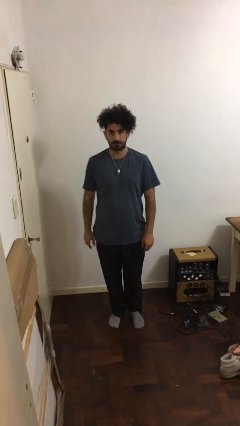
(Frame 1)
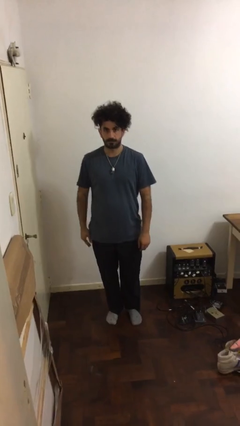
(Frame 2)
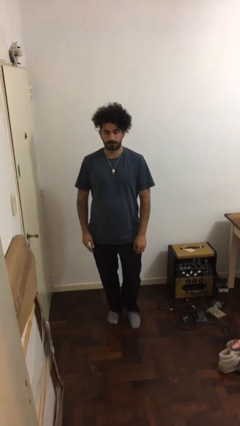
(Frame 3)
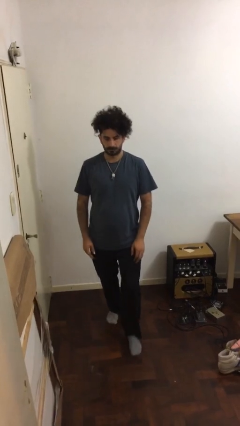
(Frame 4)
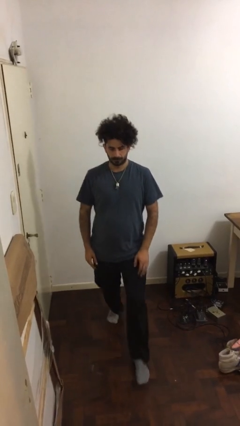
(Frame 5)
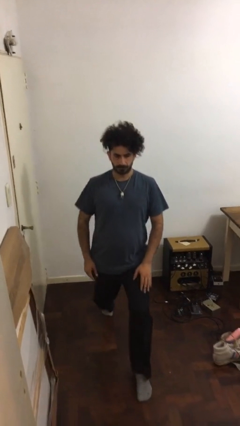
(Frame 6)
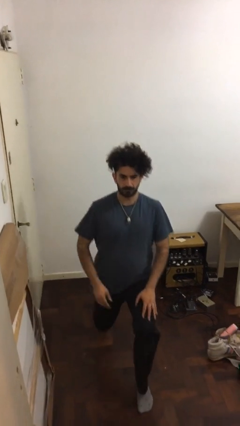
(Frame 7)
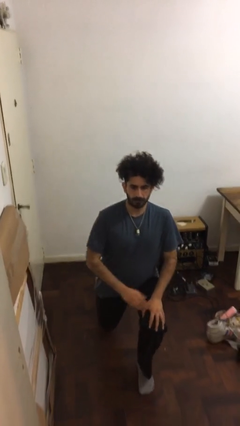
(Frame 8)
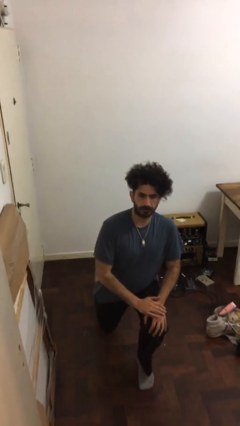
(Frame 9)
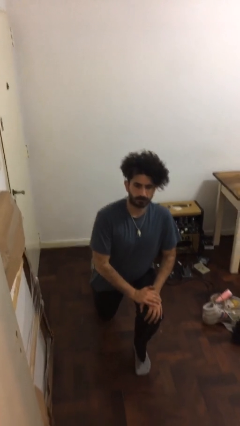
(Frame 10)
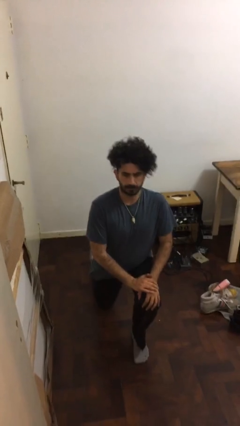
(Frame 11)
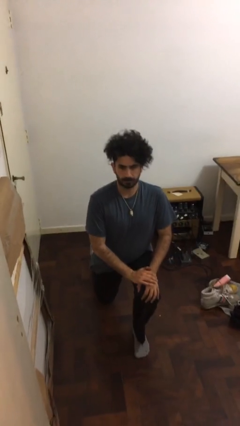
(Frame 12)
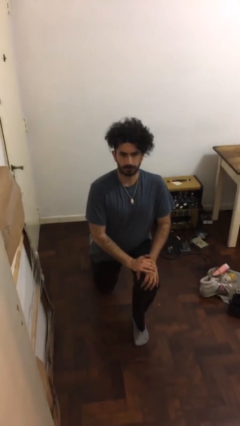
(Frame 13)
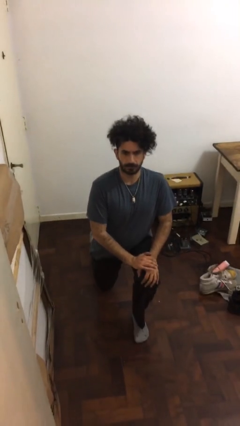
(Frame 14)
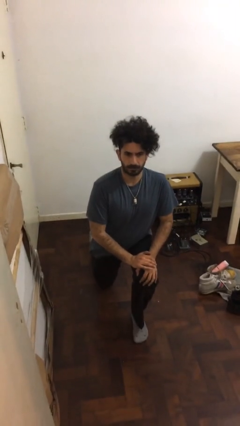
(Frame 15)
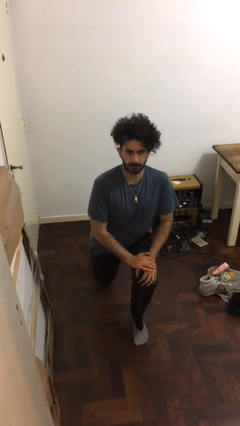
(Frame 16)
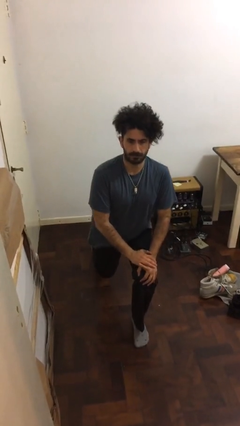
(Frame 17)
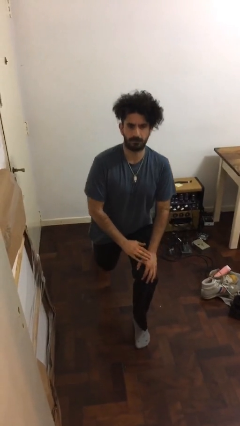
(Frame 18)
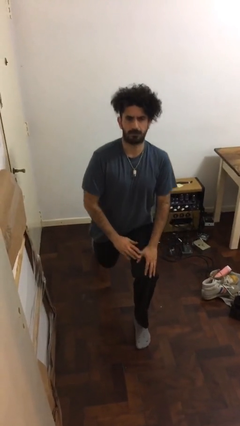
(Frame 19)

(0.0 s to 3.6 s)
person kneels

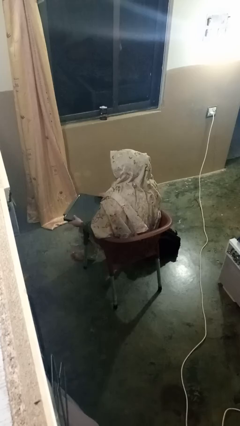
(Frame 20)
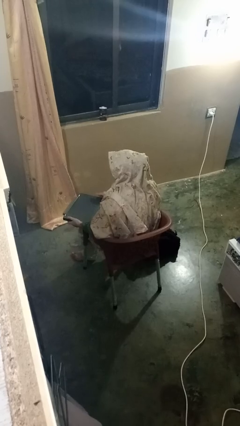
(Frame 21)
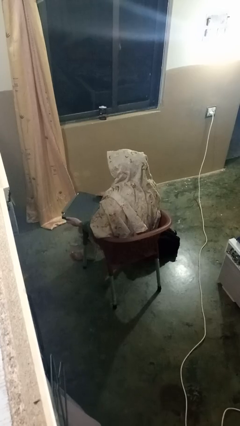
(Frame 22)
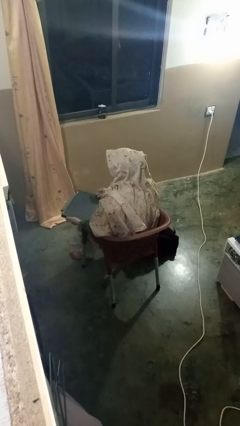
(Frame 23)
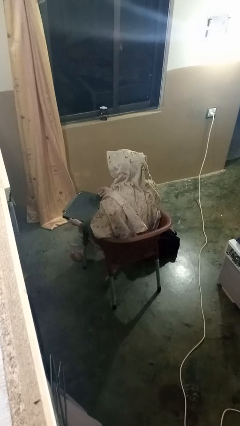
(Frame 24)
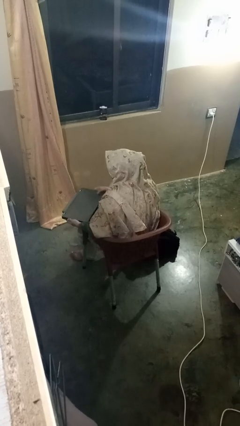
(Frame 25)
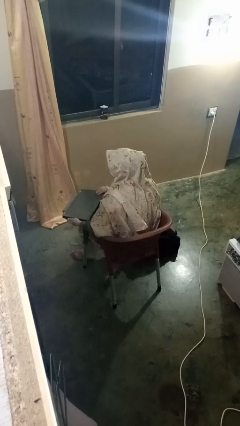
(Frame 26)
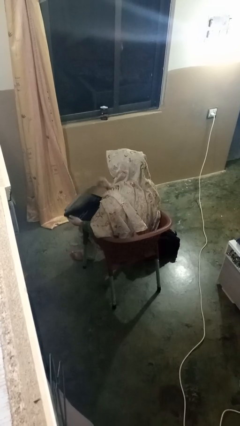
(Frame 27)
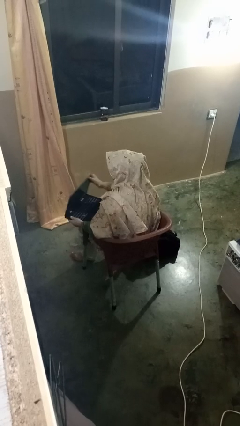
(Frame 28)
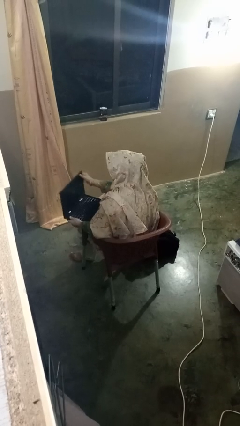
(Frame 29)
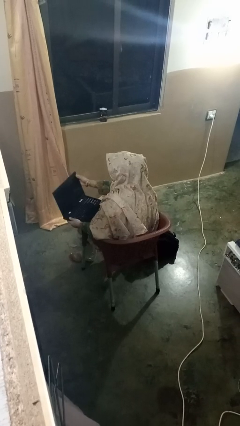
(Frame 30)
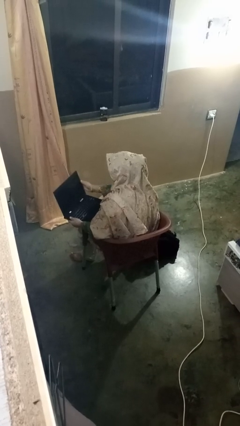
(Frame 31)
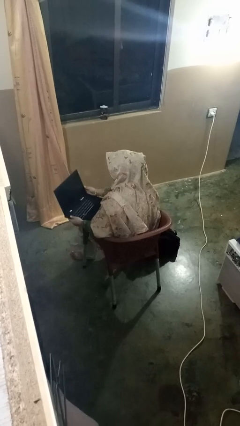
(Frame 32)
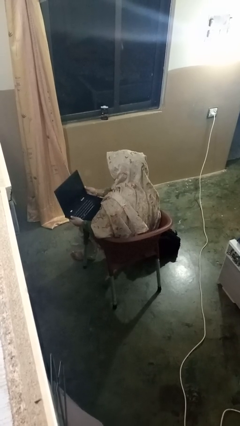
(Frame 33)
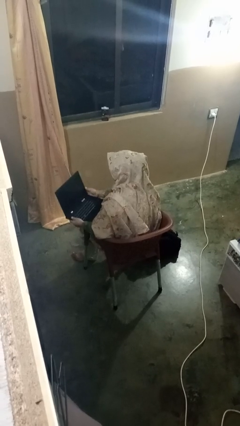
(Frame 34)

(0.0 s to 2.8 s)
person opens laptop

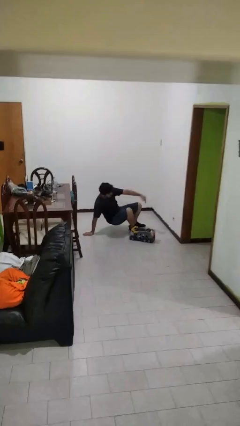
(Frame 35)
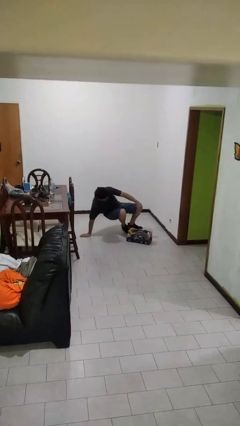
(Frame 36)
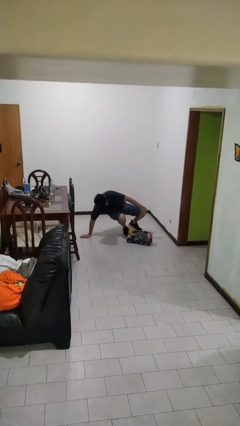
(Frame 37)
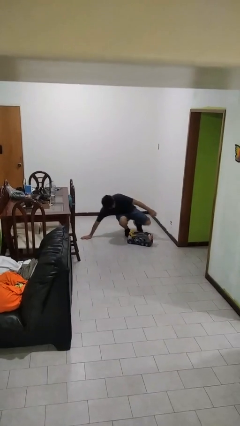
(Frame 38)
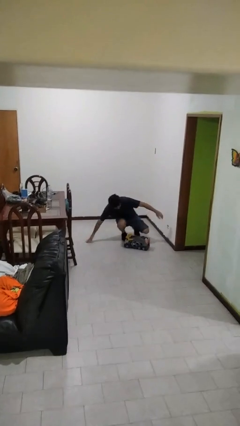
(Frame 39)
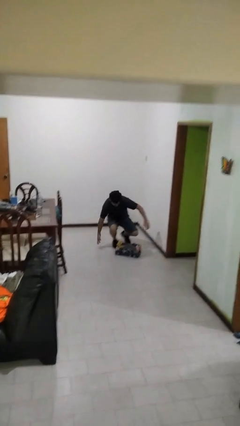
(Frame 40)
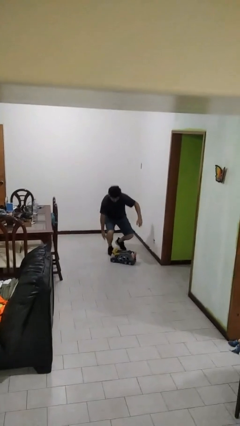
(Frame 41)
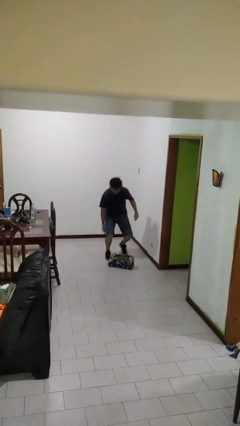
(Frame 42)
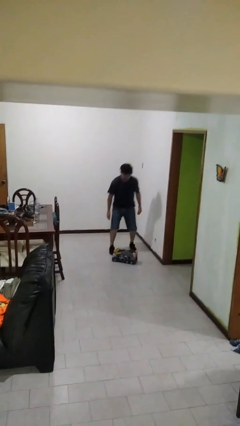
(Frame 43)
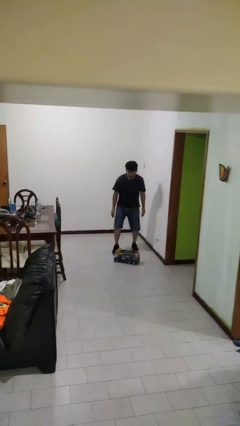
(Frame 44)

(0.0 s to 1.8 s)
person stands up from floor

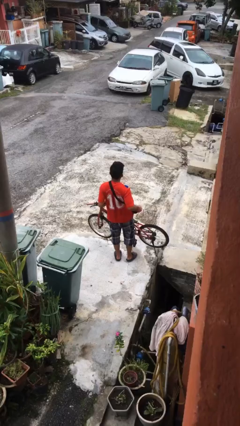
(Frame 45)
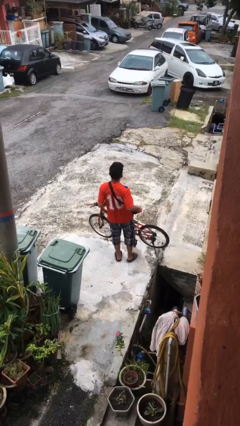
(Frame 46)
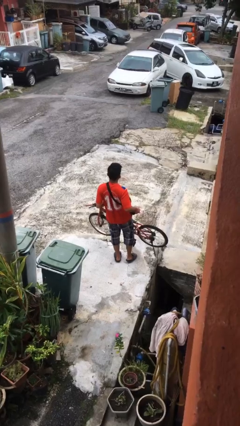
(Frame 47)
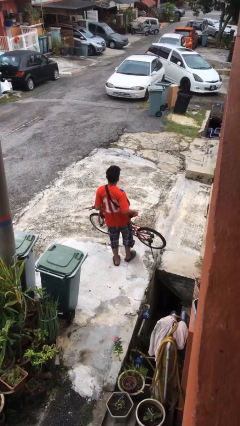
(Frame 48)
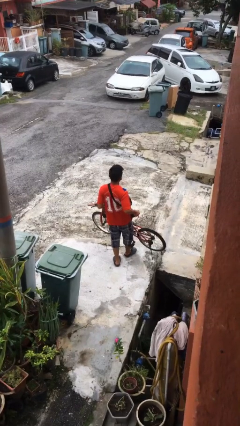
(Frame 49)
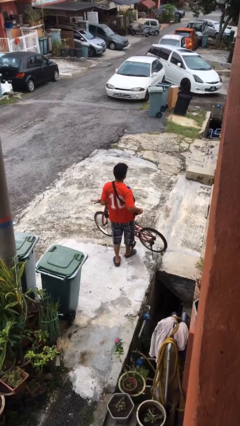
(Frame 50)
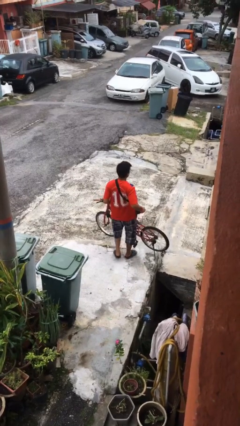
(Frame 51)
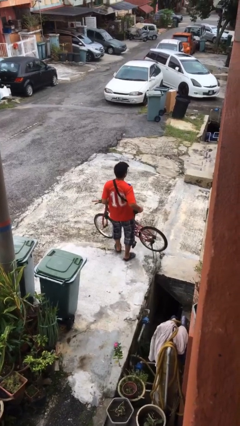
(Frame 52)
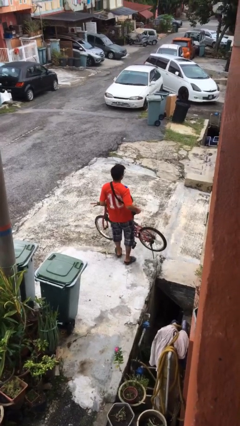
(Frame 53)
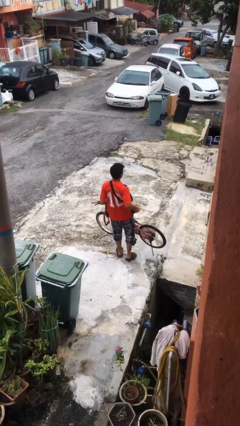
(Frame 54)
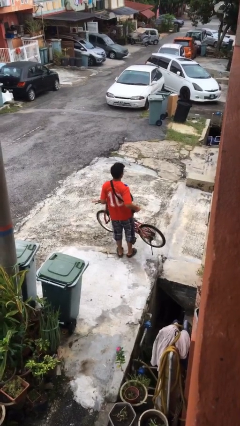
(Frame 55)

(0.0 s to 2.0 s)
person carries bicycle

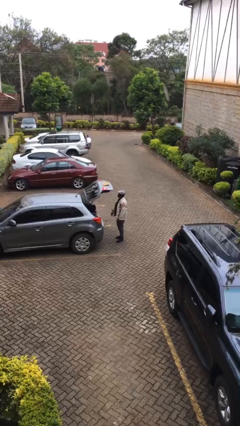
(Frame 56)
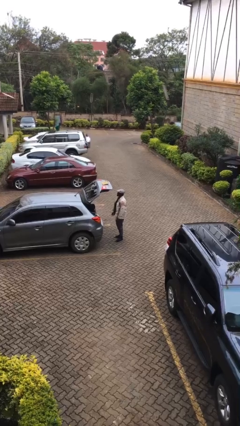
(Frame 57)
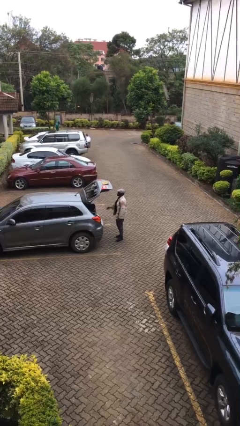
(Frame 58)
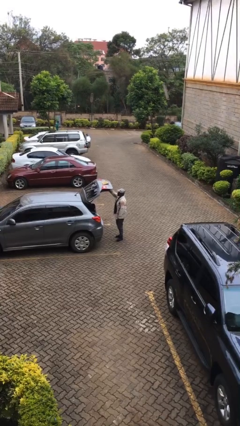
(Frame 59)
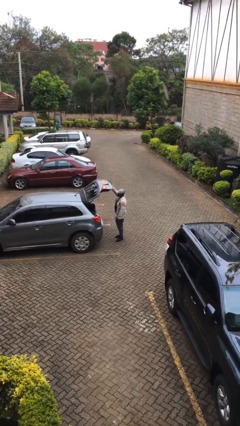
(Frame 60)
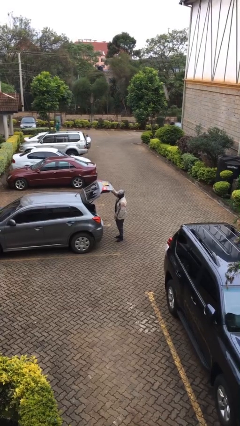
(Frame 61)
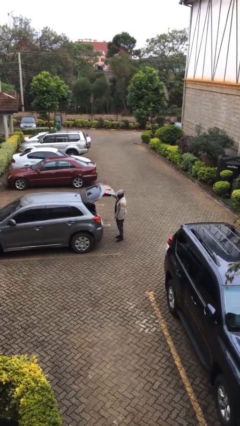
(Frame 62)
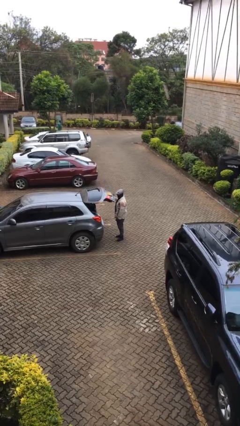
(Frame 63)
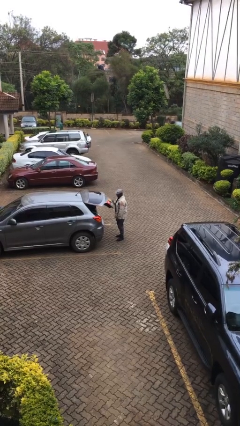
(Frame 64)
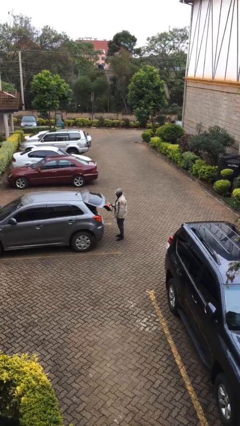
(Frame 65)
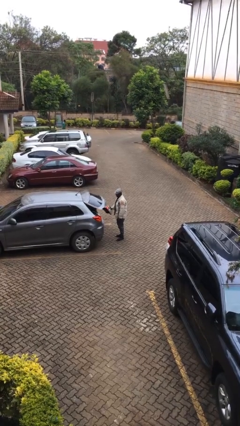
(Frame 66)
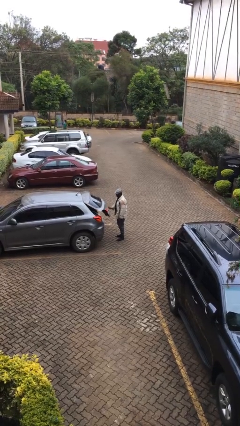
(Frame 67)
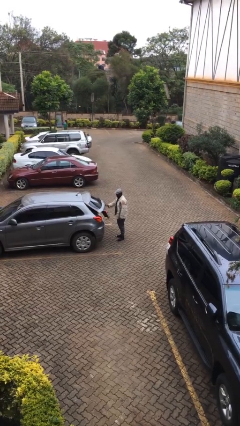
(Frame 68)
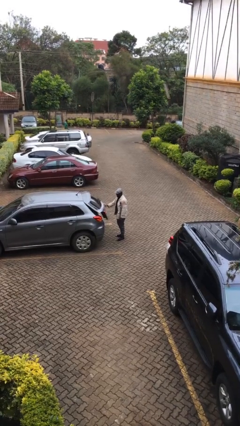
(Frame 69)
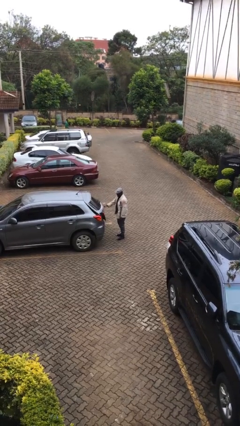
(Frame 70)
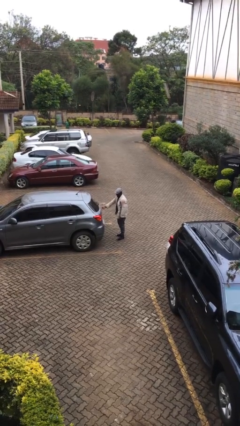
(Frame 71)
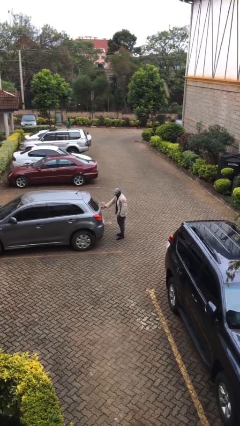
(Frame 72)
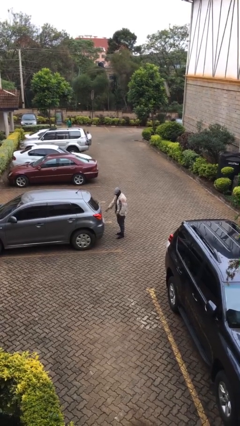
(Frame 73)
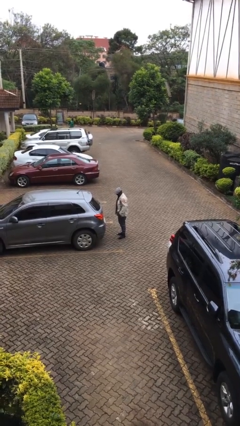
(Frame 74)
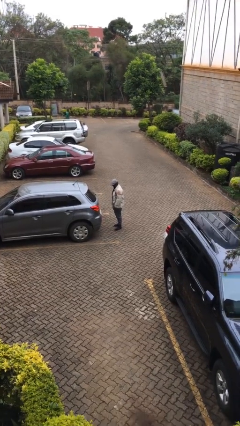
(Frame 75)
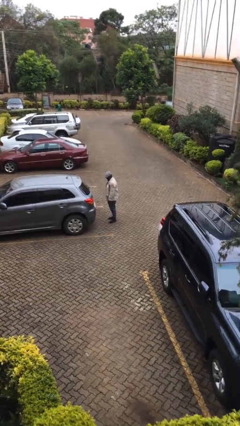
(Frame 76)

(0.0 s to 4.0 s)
person closes car trunk

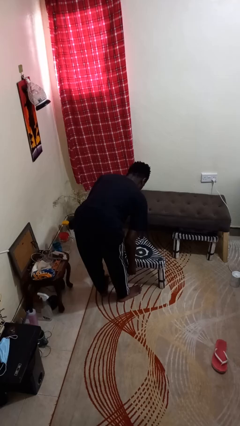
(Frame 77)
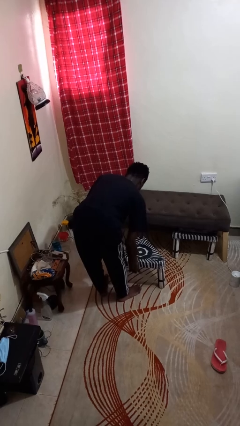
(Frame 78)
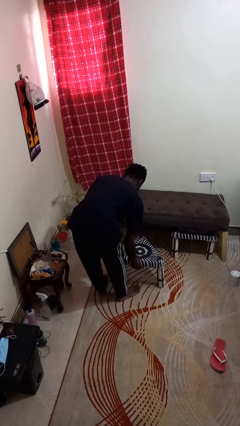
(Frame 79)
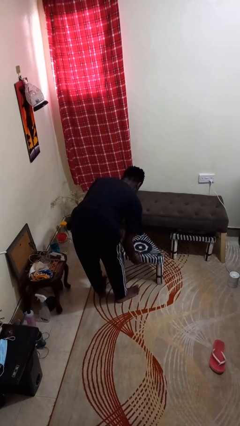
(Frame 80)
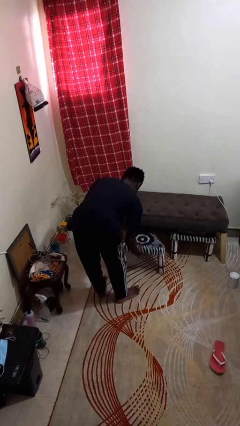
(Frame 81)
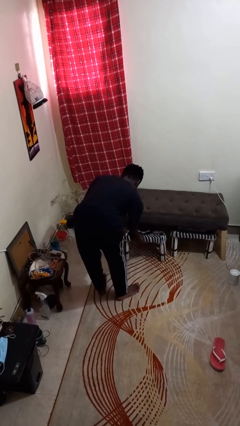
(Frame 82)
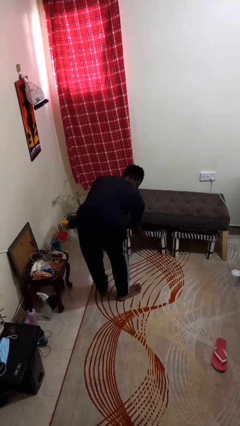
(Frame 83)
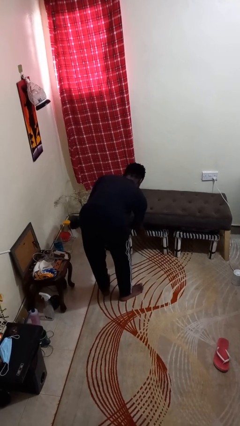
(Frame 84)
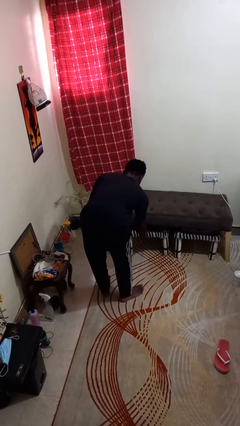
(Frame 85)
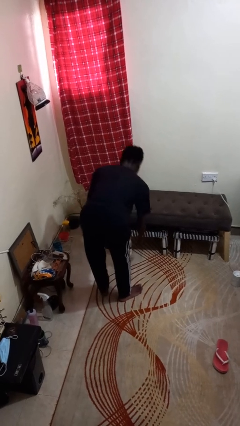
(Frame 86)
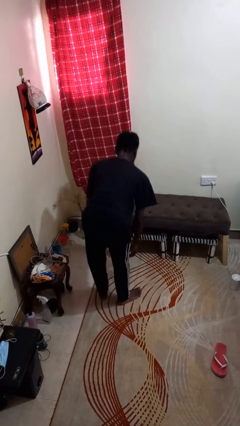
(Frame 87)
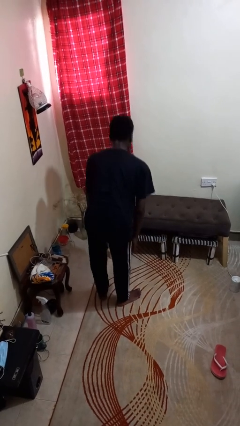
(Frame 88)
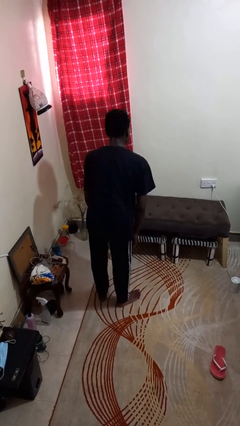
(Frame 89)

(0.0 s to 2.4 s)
person pushes in chair

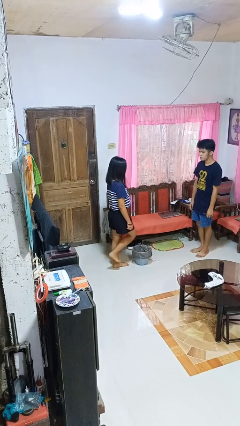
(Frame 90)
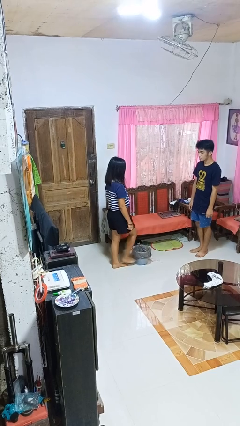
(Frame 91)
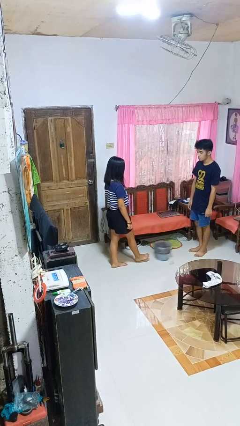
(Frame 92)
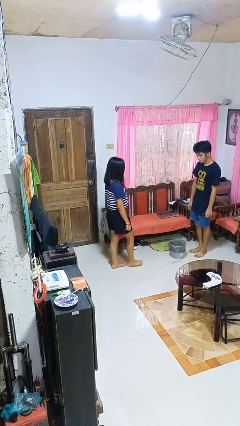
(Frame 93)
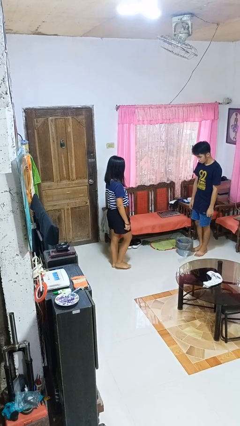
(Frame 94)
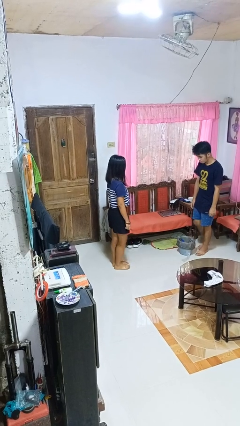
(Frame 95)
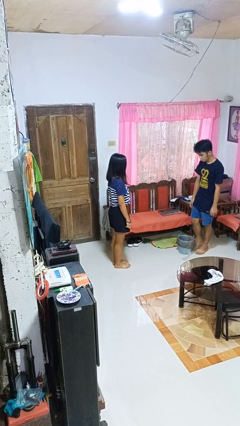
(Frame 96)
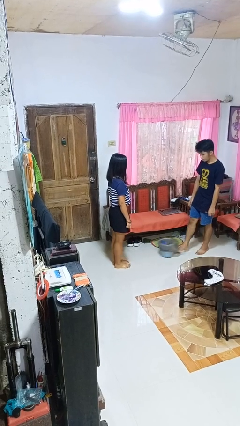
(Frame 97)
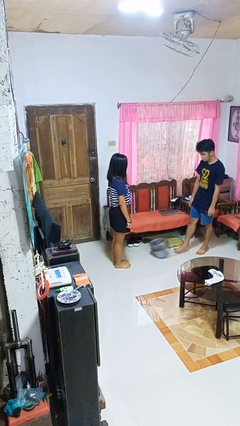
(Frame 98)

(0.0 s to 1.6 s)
person kicks object to person
